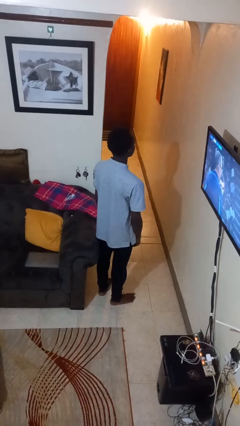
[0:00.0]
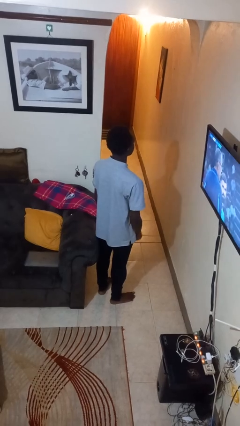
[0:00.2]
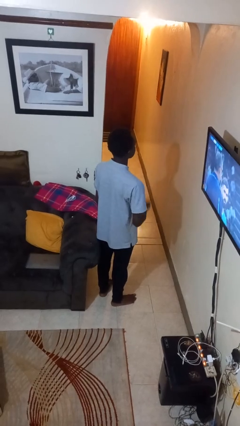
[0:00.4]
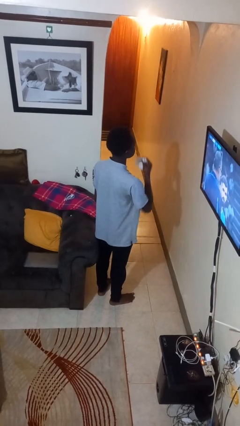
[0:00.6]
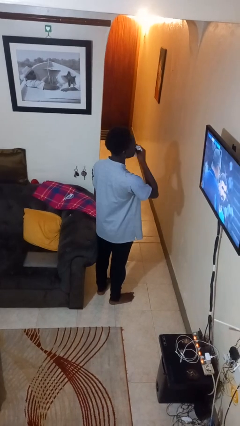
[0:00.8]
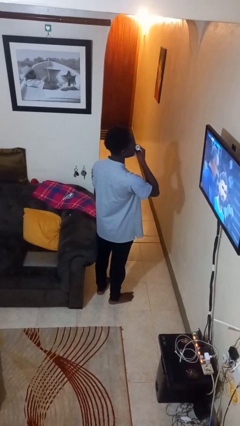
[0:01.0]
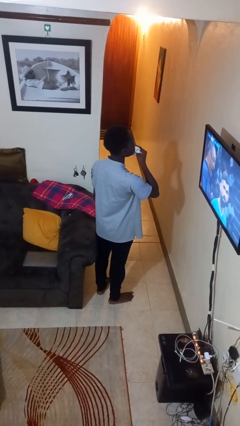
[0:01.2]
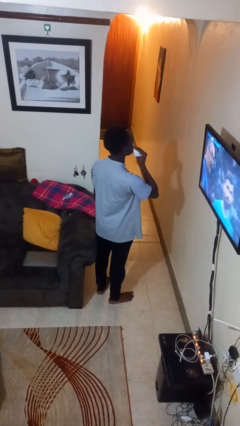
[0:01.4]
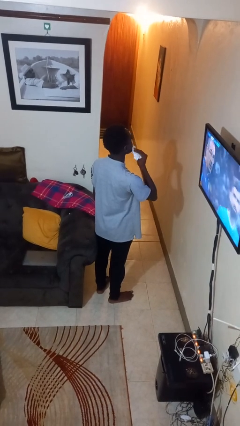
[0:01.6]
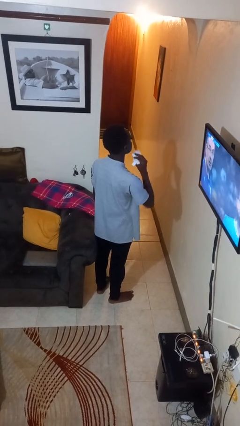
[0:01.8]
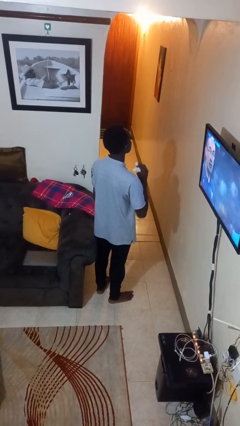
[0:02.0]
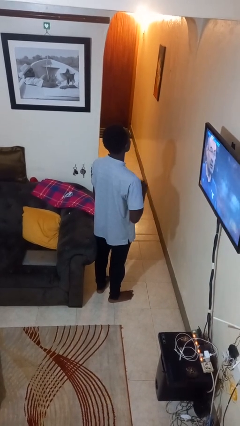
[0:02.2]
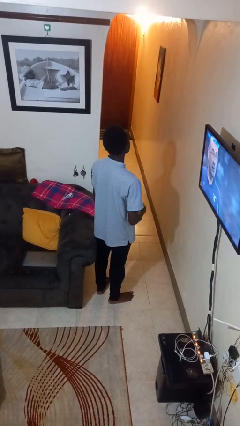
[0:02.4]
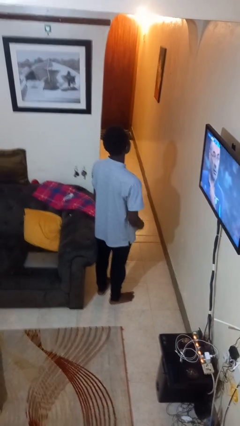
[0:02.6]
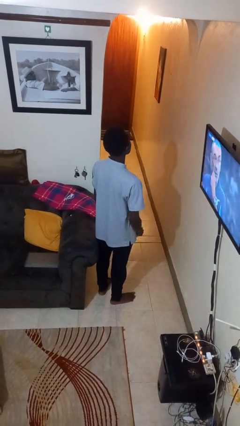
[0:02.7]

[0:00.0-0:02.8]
person wipes mouth with napkin

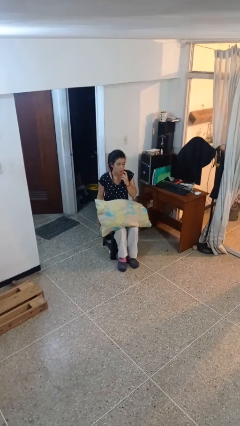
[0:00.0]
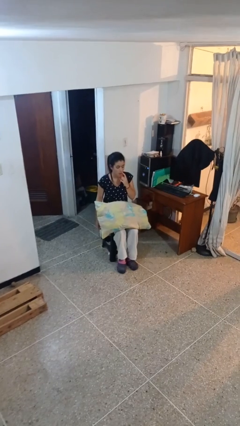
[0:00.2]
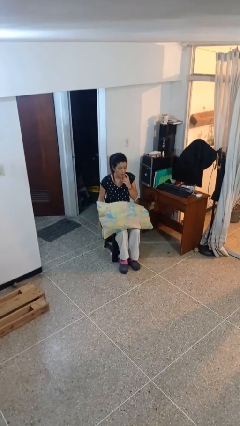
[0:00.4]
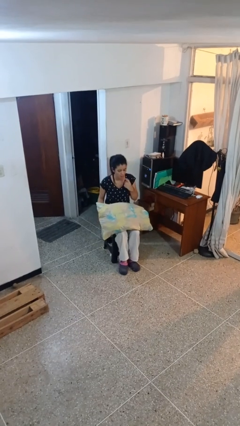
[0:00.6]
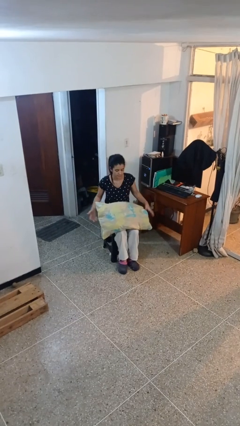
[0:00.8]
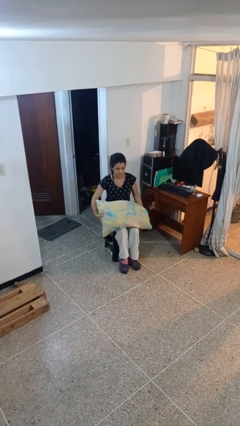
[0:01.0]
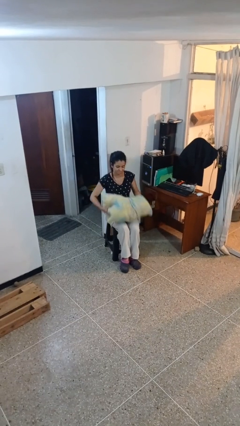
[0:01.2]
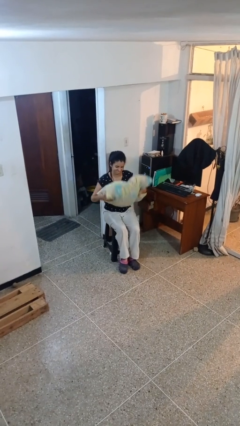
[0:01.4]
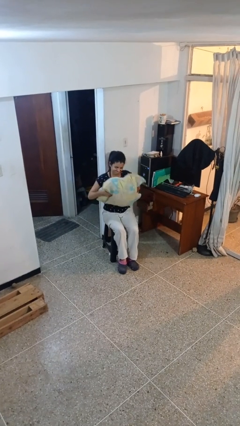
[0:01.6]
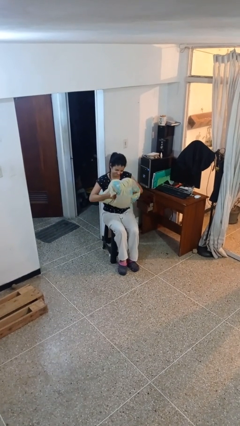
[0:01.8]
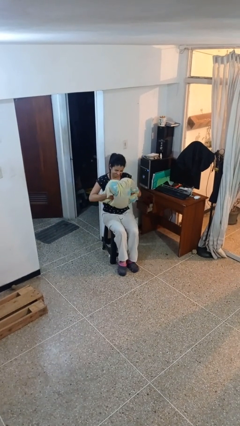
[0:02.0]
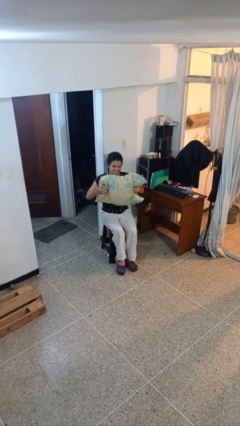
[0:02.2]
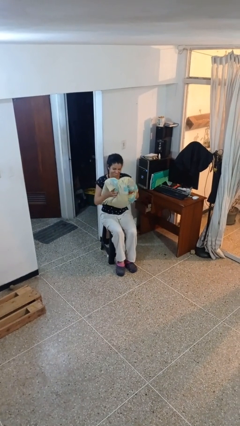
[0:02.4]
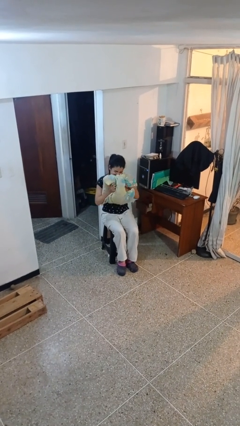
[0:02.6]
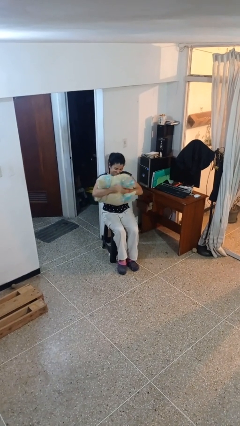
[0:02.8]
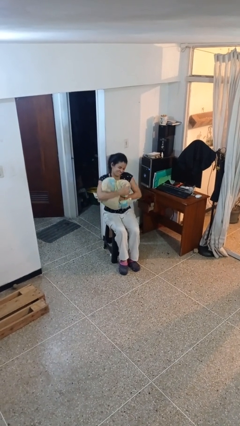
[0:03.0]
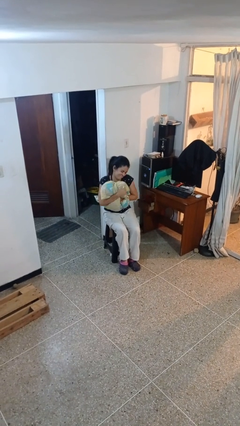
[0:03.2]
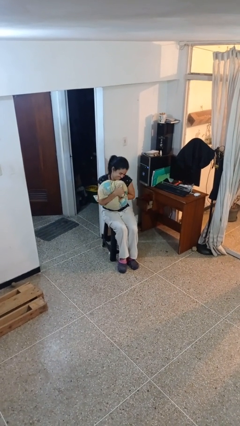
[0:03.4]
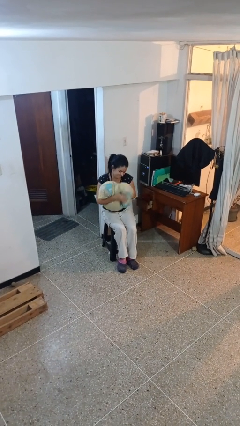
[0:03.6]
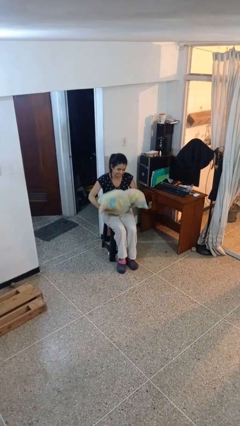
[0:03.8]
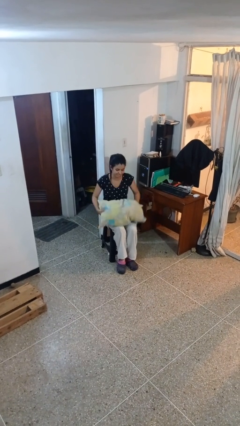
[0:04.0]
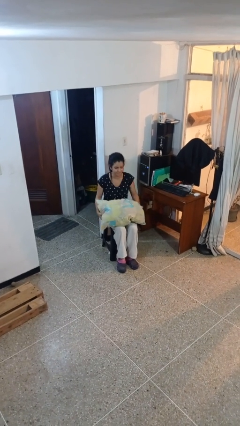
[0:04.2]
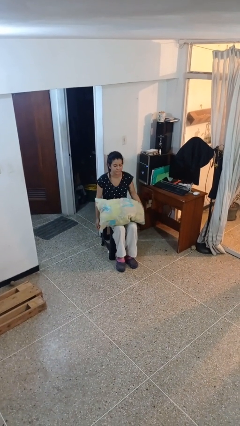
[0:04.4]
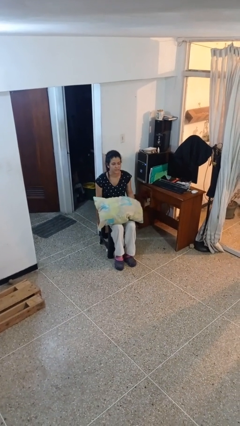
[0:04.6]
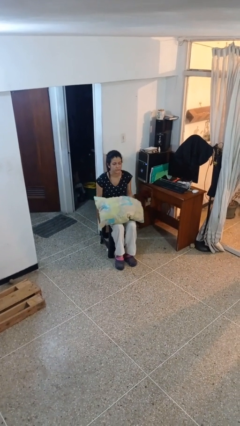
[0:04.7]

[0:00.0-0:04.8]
person squeezes object

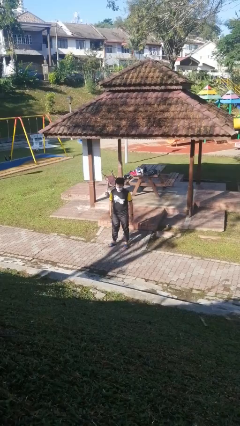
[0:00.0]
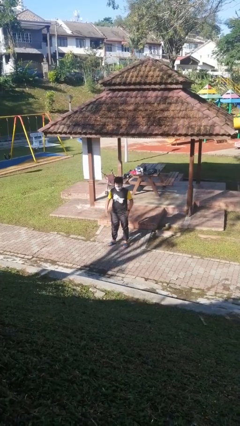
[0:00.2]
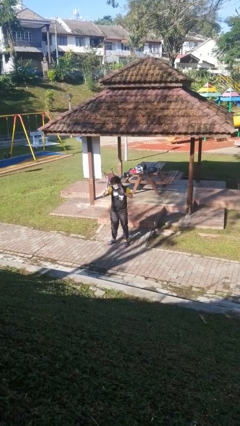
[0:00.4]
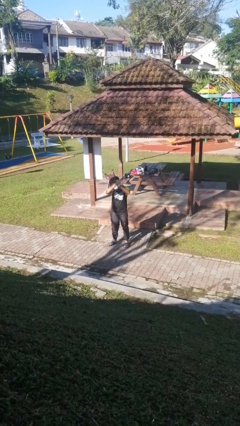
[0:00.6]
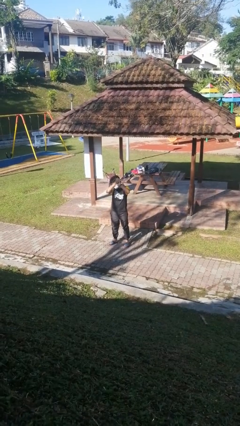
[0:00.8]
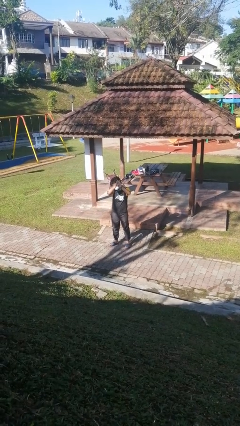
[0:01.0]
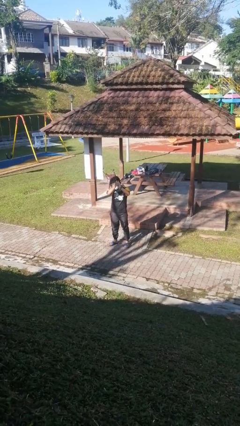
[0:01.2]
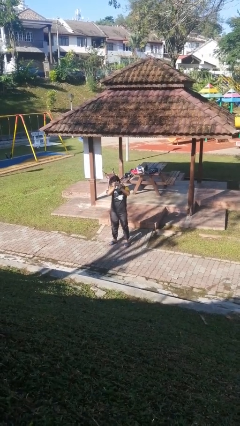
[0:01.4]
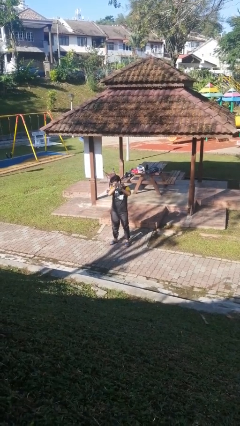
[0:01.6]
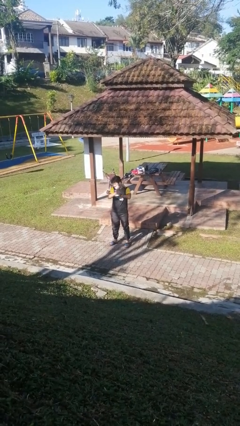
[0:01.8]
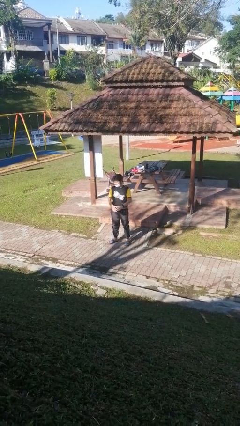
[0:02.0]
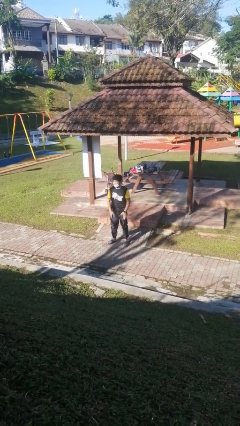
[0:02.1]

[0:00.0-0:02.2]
person claps hands

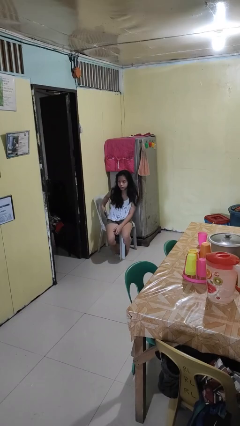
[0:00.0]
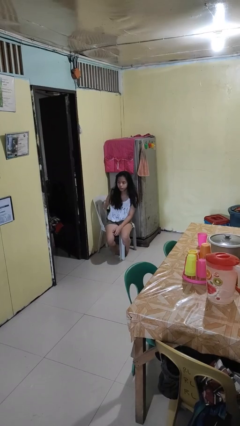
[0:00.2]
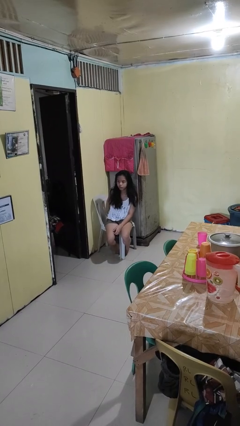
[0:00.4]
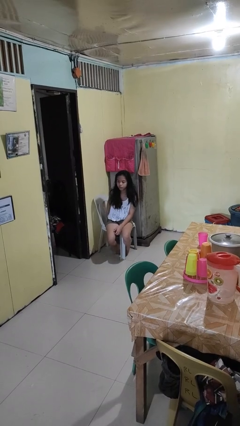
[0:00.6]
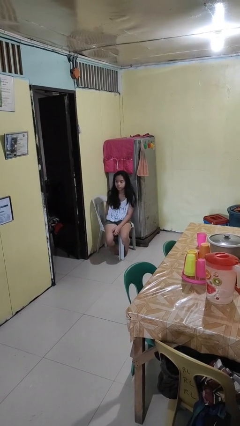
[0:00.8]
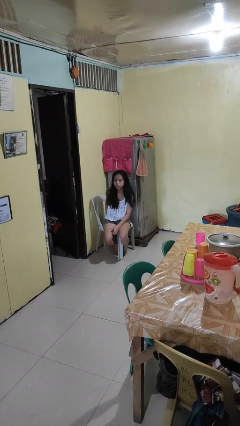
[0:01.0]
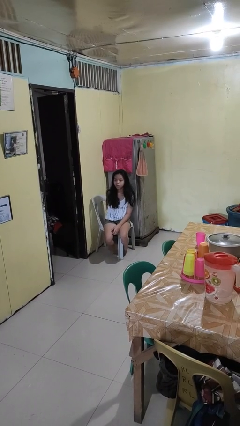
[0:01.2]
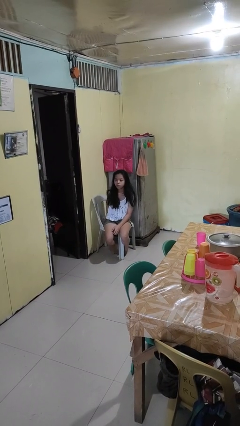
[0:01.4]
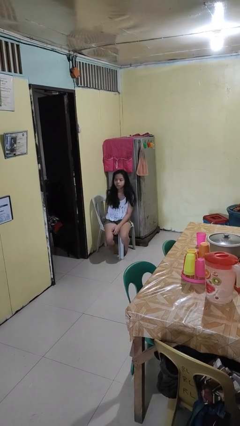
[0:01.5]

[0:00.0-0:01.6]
person puts phone into pocket

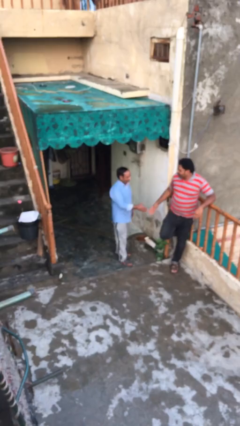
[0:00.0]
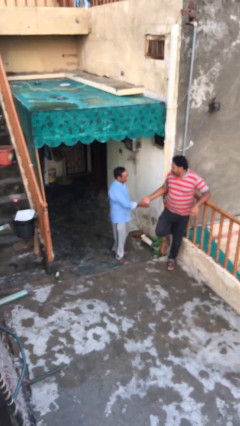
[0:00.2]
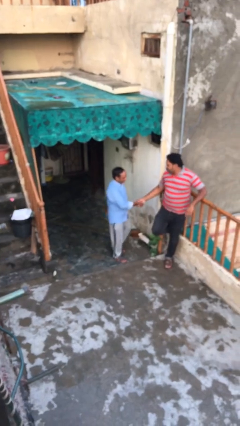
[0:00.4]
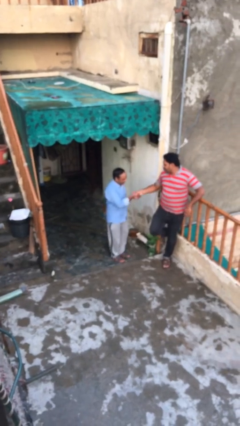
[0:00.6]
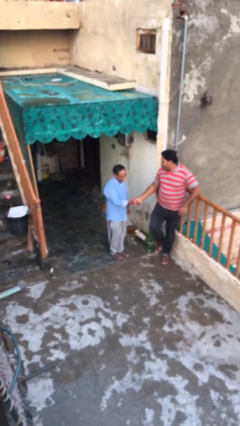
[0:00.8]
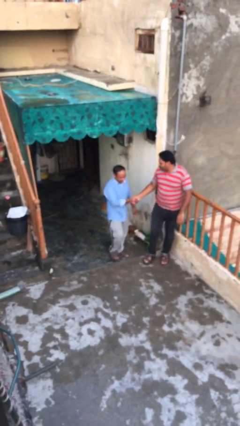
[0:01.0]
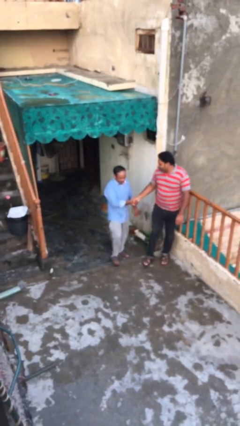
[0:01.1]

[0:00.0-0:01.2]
person shakes hand

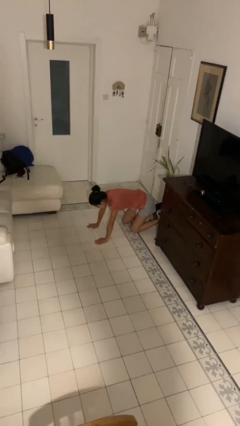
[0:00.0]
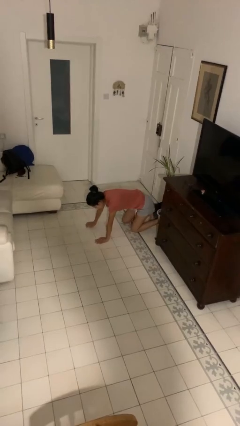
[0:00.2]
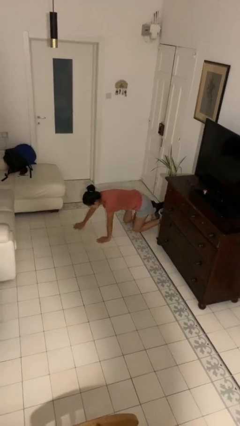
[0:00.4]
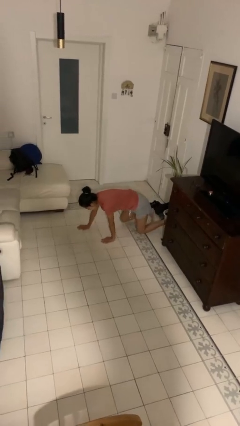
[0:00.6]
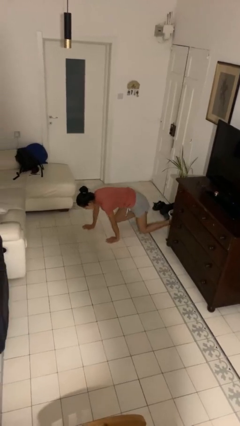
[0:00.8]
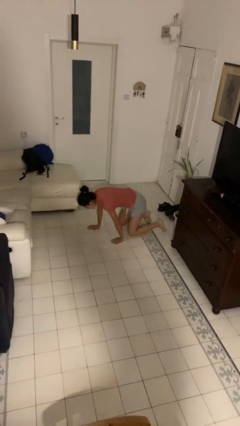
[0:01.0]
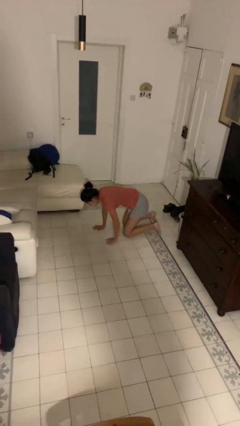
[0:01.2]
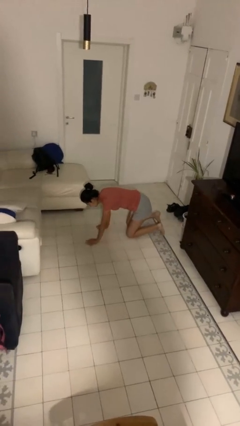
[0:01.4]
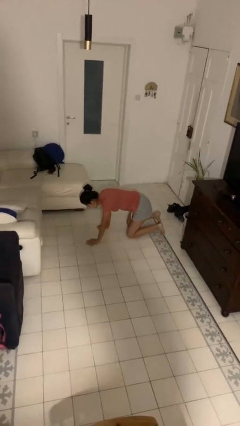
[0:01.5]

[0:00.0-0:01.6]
person crawls

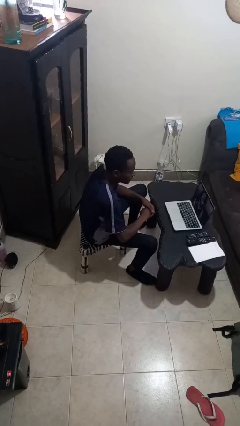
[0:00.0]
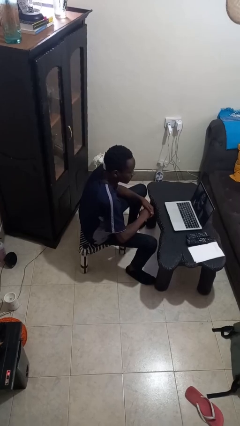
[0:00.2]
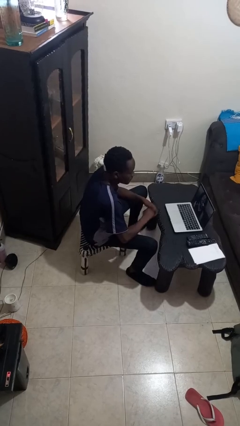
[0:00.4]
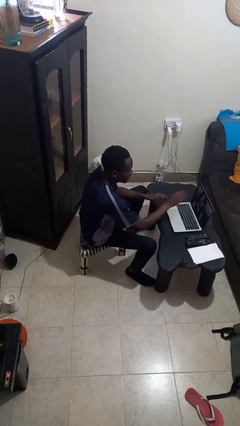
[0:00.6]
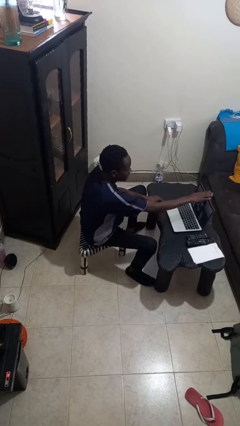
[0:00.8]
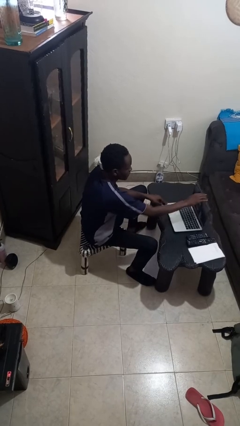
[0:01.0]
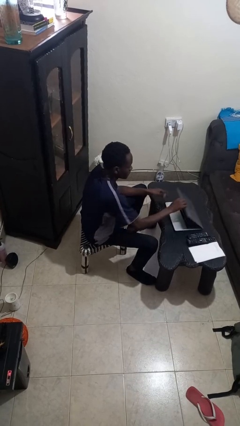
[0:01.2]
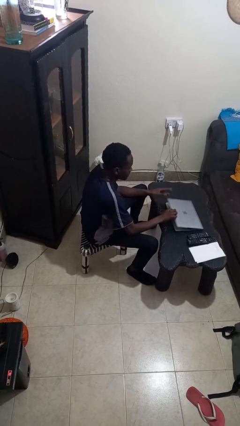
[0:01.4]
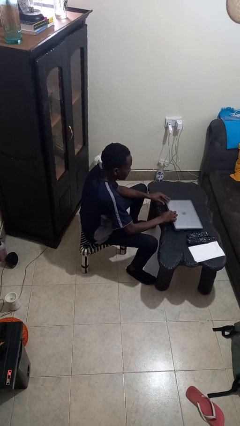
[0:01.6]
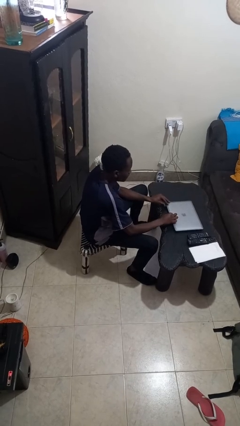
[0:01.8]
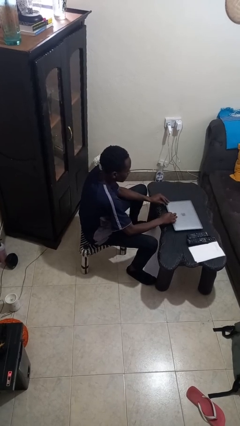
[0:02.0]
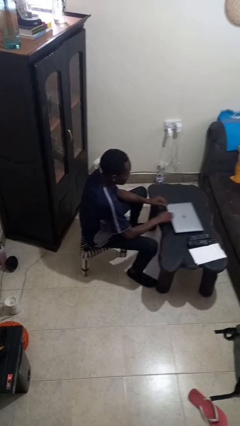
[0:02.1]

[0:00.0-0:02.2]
person closes laptop

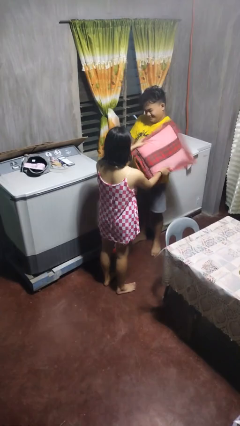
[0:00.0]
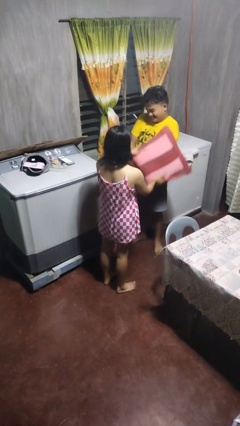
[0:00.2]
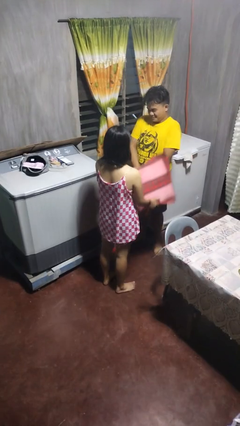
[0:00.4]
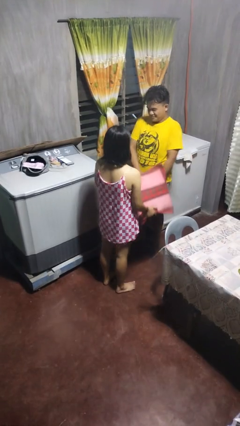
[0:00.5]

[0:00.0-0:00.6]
person hits person with pillow

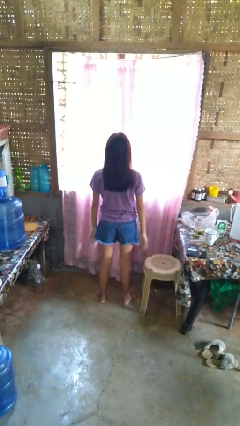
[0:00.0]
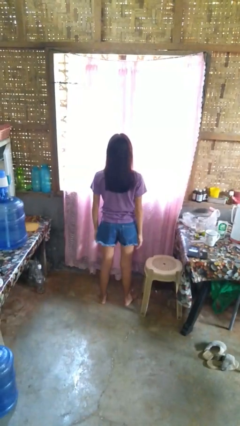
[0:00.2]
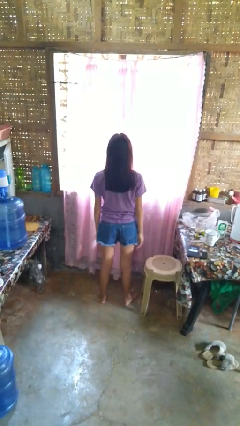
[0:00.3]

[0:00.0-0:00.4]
person closes curtains
